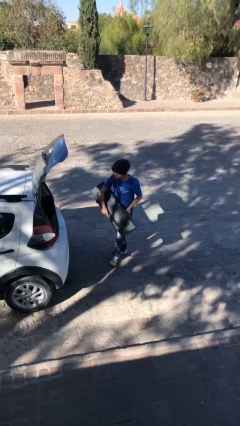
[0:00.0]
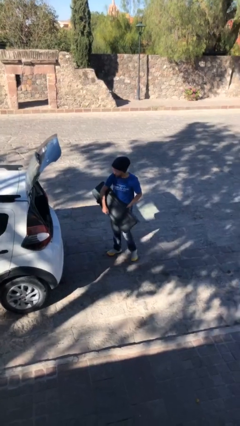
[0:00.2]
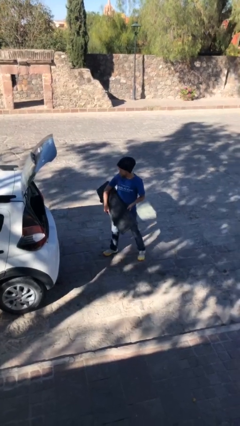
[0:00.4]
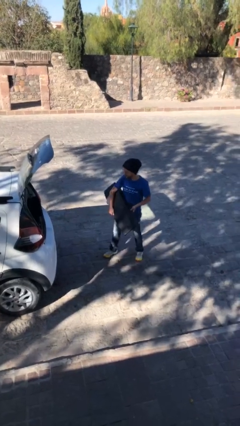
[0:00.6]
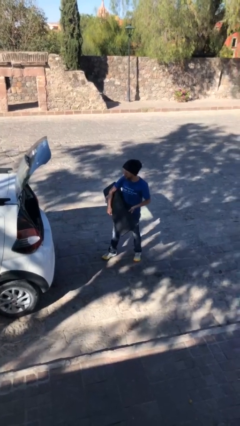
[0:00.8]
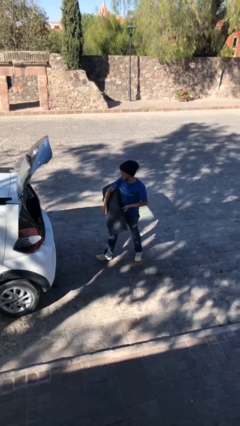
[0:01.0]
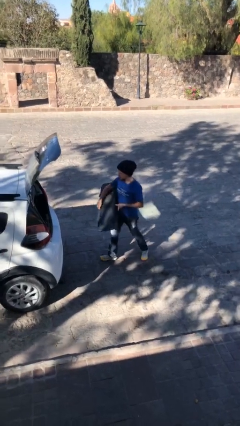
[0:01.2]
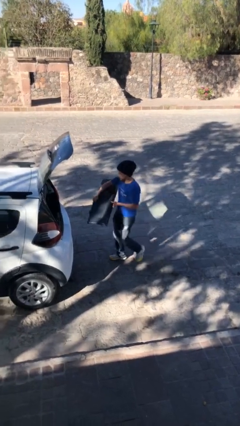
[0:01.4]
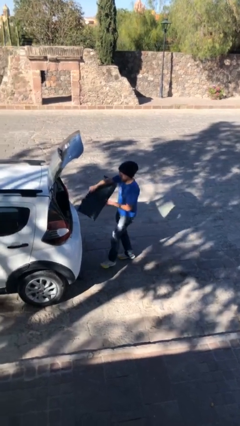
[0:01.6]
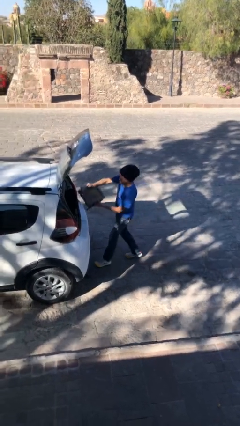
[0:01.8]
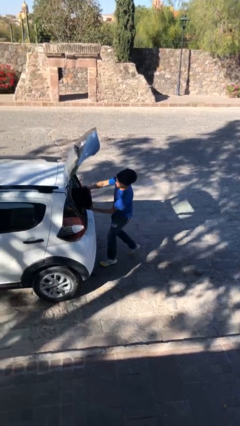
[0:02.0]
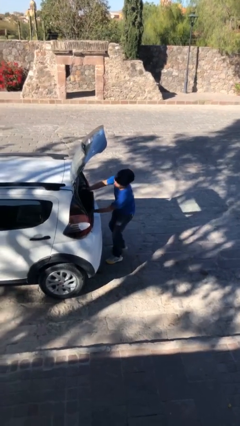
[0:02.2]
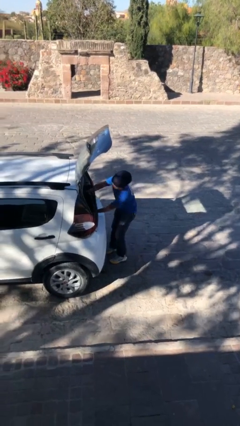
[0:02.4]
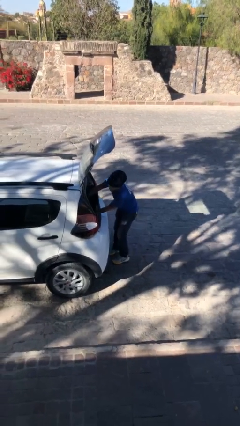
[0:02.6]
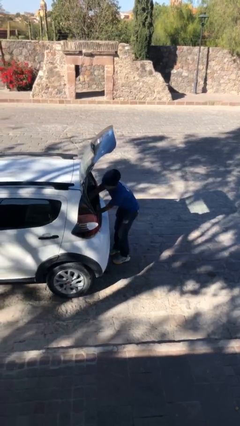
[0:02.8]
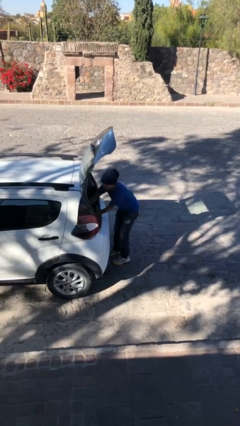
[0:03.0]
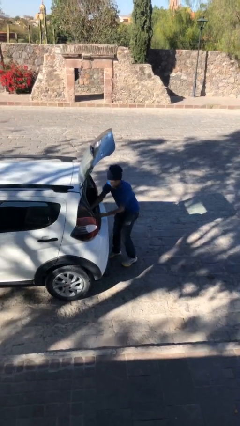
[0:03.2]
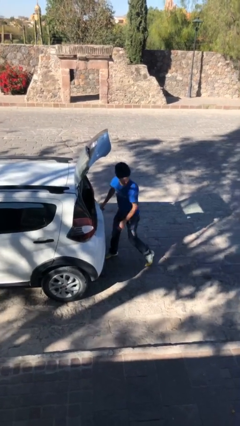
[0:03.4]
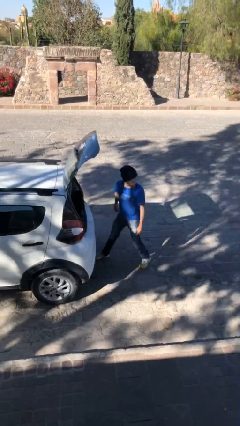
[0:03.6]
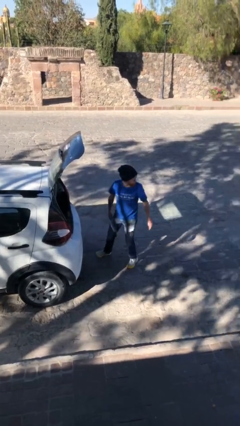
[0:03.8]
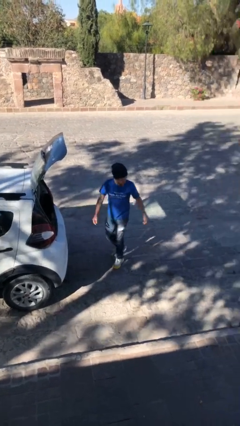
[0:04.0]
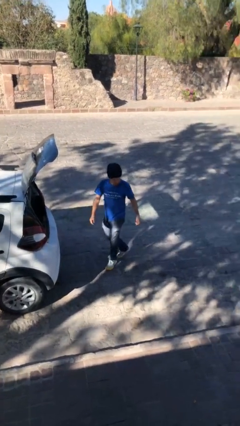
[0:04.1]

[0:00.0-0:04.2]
person loads car

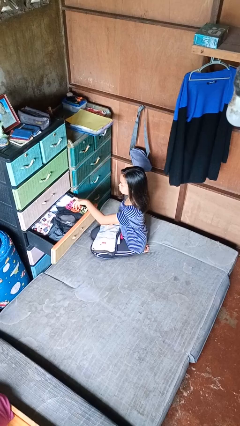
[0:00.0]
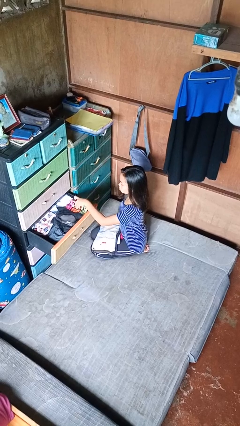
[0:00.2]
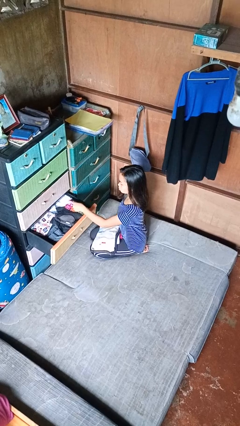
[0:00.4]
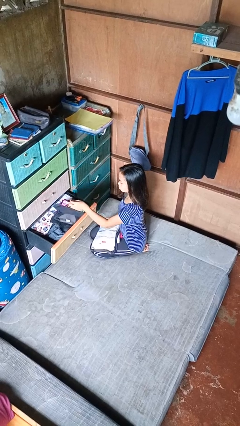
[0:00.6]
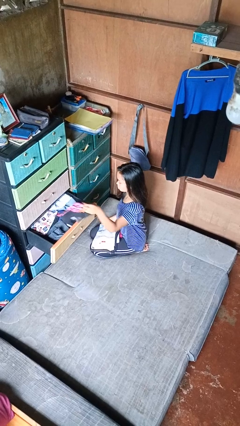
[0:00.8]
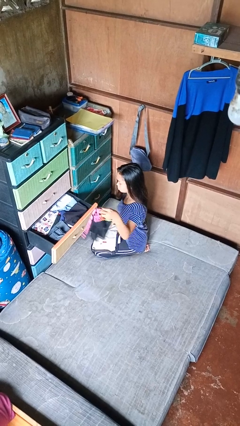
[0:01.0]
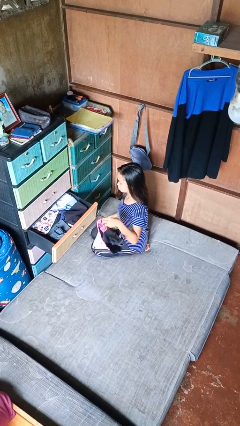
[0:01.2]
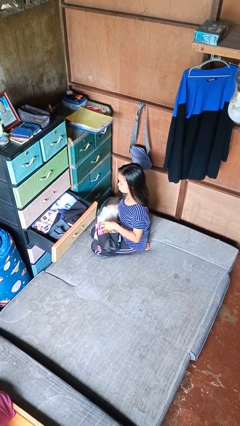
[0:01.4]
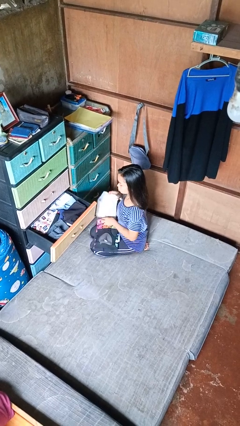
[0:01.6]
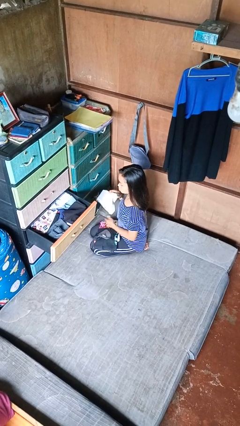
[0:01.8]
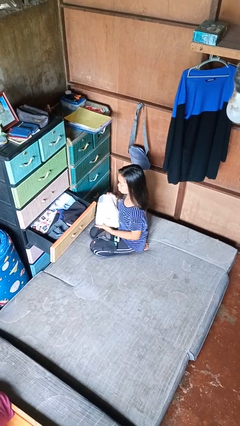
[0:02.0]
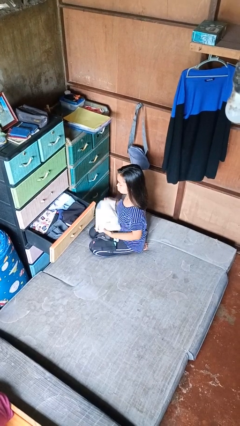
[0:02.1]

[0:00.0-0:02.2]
person takes clothes from dresser

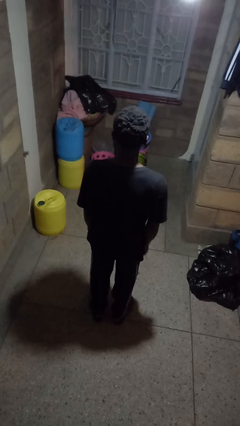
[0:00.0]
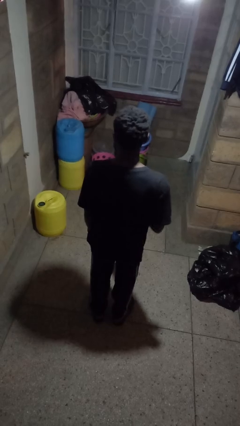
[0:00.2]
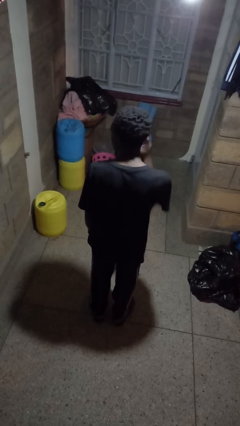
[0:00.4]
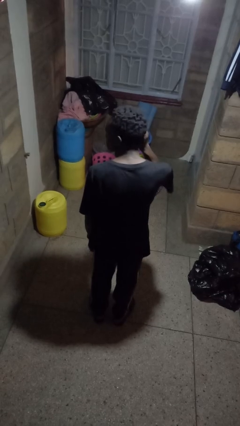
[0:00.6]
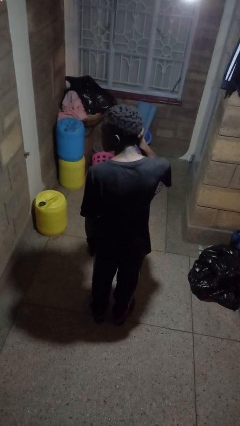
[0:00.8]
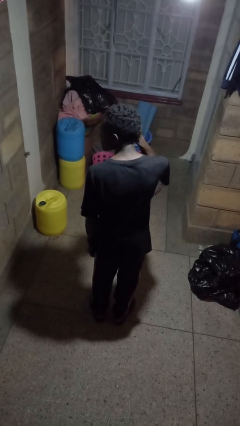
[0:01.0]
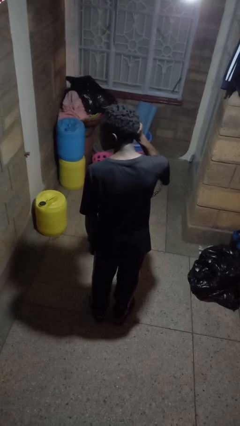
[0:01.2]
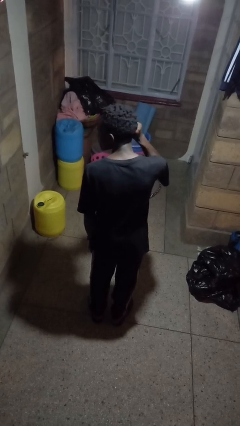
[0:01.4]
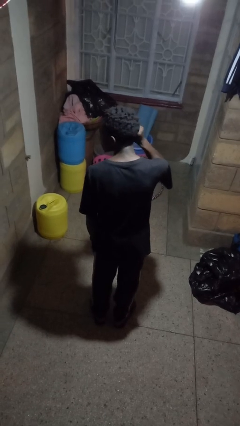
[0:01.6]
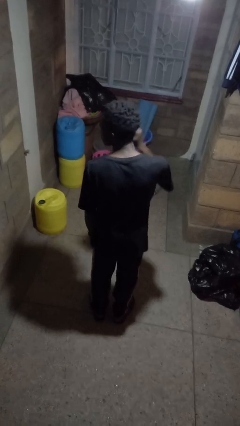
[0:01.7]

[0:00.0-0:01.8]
person touches earlobe

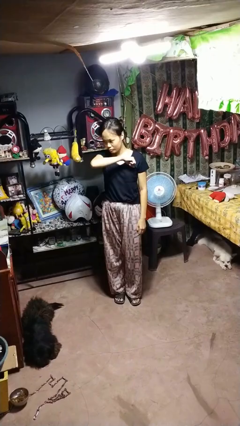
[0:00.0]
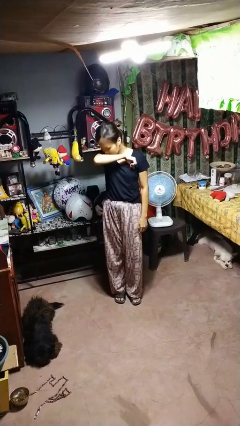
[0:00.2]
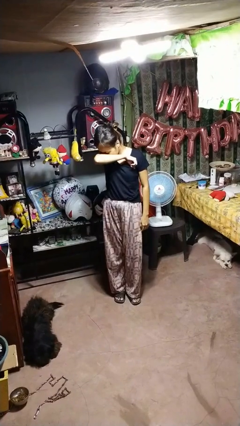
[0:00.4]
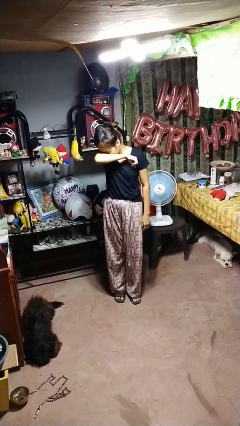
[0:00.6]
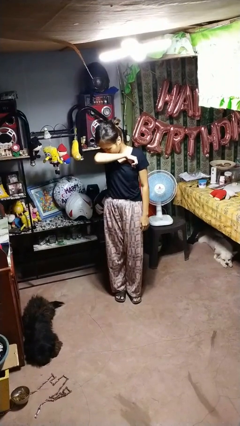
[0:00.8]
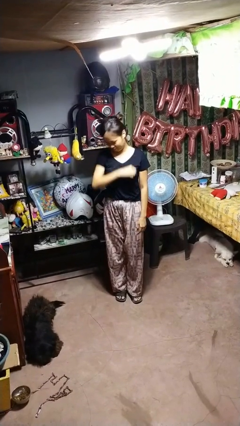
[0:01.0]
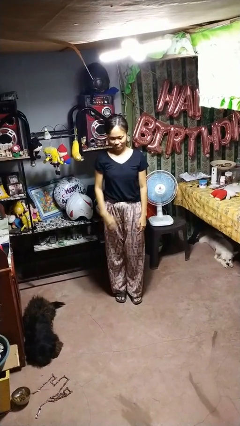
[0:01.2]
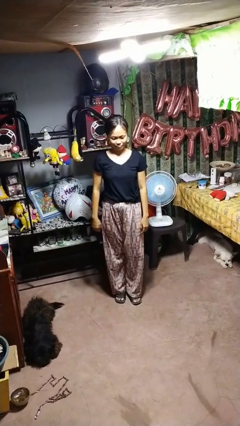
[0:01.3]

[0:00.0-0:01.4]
person sneezes into arm

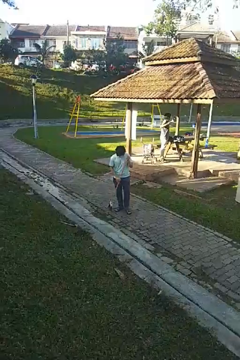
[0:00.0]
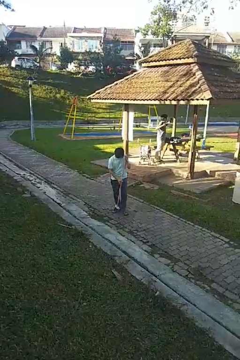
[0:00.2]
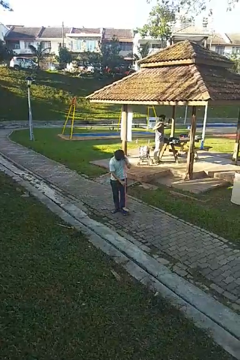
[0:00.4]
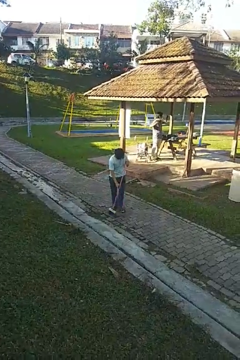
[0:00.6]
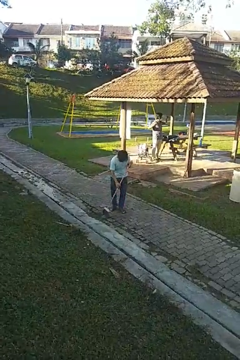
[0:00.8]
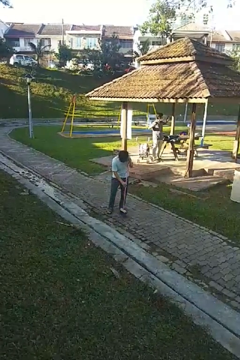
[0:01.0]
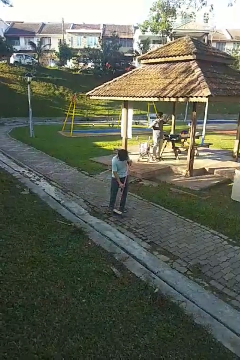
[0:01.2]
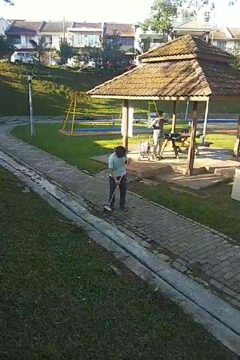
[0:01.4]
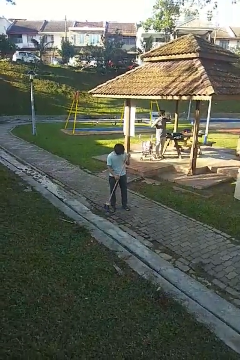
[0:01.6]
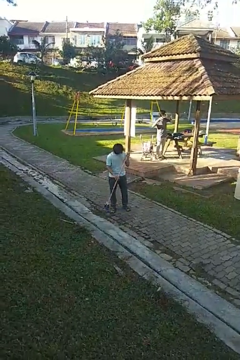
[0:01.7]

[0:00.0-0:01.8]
person sweeps floor

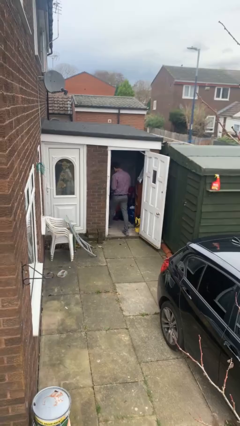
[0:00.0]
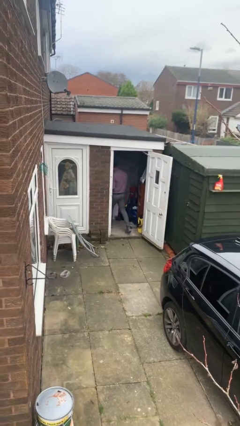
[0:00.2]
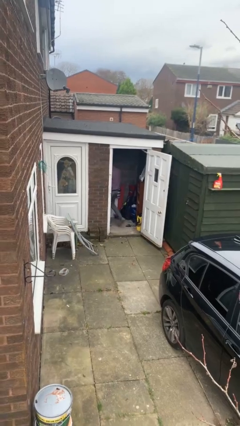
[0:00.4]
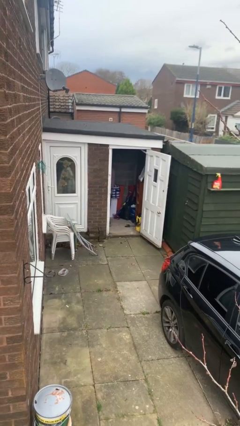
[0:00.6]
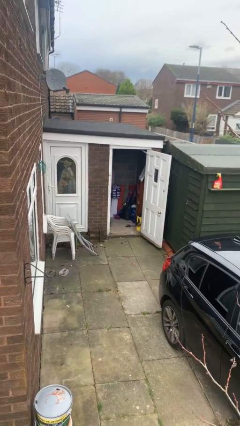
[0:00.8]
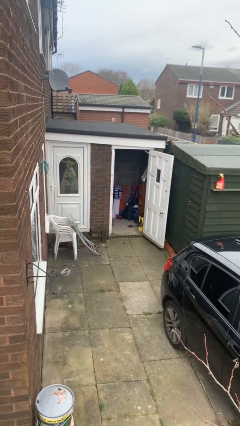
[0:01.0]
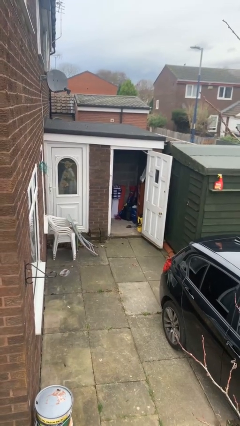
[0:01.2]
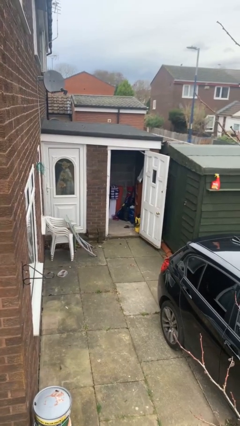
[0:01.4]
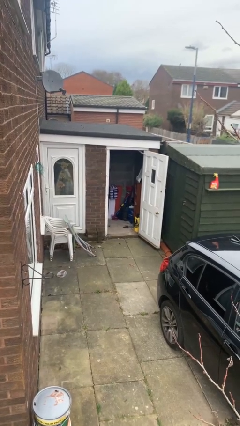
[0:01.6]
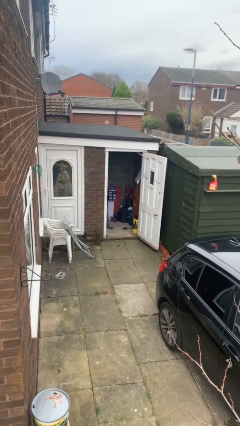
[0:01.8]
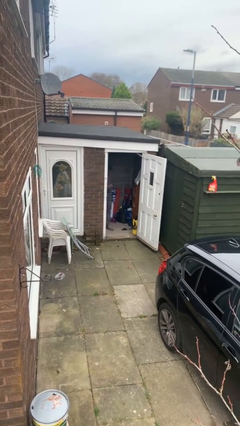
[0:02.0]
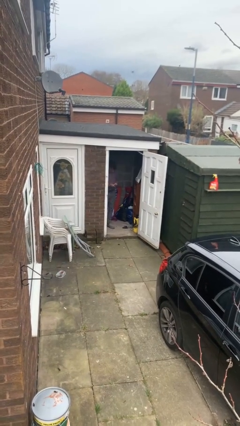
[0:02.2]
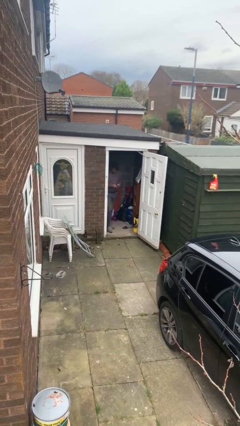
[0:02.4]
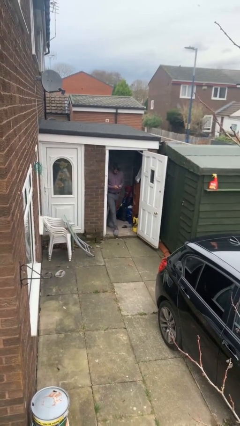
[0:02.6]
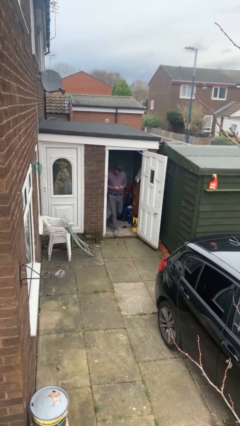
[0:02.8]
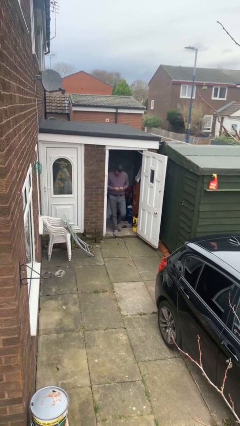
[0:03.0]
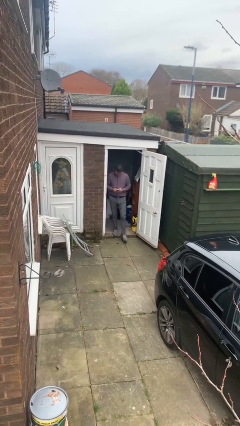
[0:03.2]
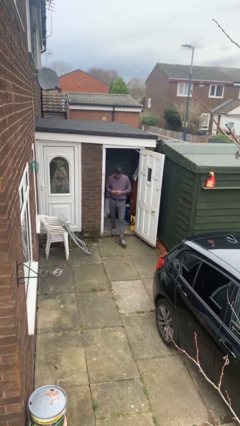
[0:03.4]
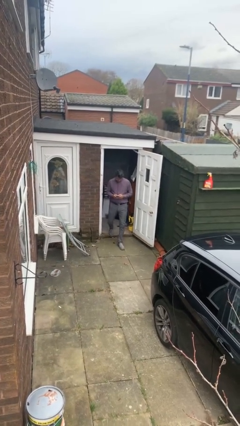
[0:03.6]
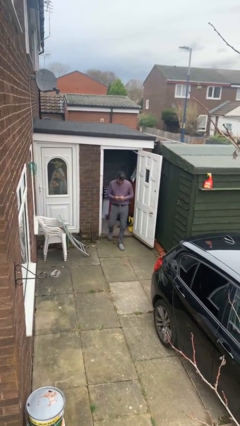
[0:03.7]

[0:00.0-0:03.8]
person enters scene through structure

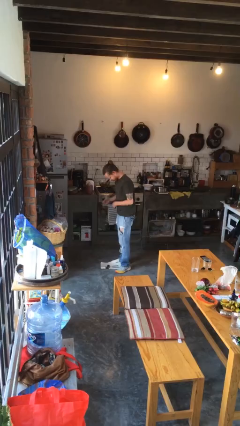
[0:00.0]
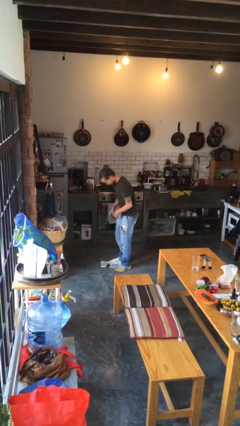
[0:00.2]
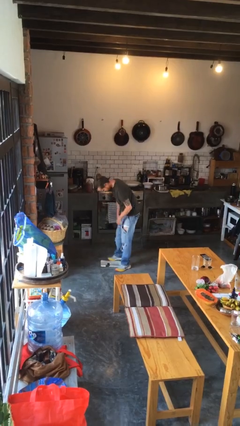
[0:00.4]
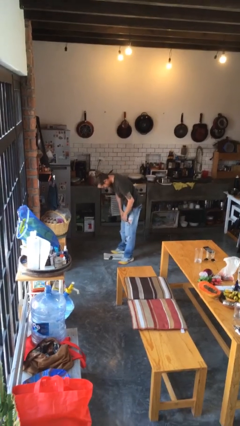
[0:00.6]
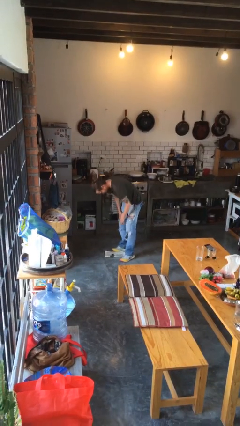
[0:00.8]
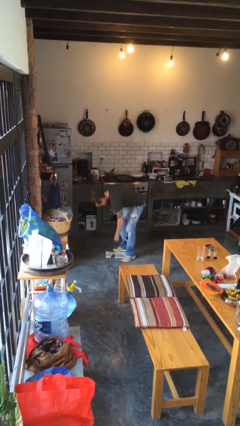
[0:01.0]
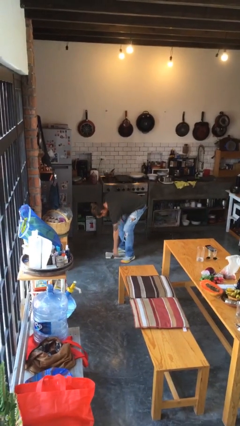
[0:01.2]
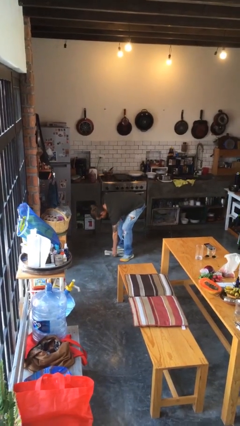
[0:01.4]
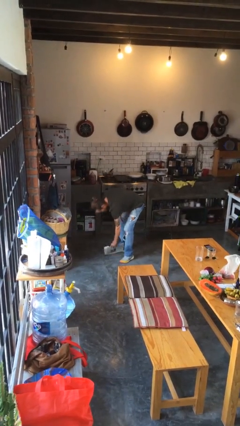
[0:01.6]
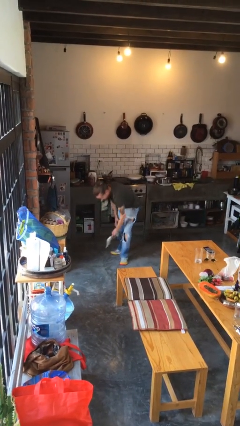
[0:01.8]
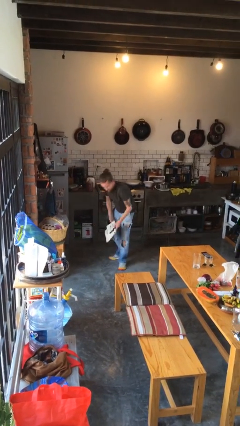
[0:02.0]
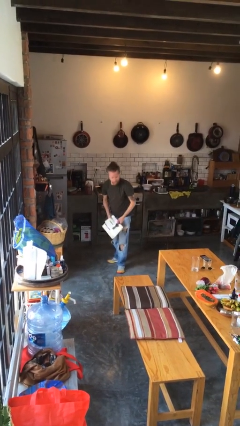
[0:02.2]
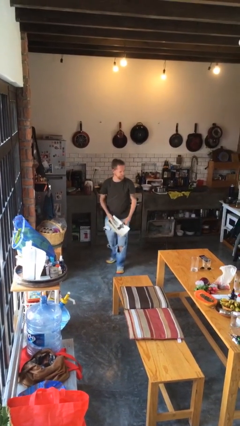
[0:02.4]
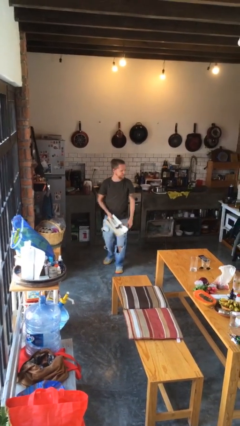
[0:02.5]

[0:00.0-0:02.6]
person picks up object from floor
